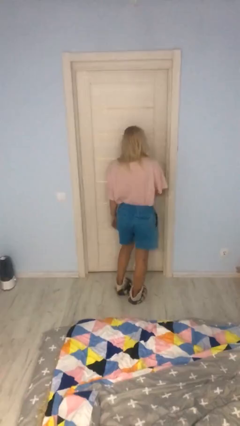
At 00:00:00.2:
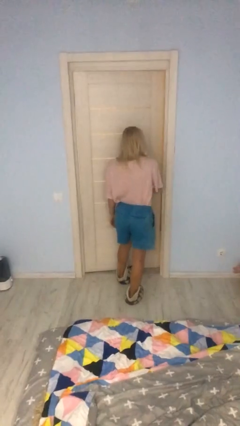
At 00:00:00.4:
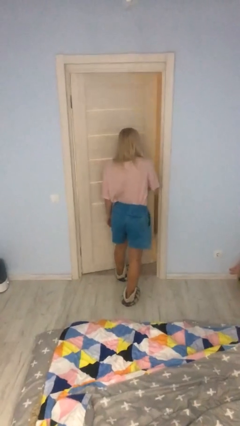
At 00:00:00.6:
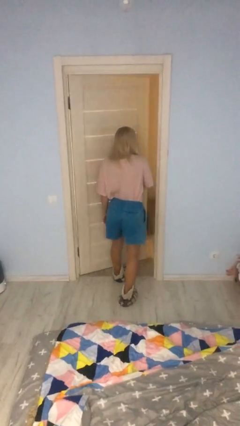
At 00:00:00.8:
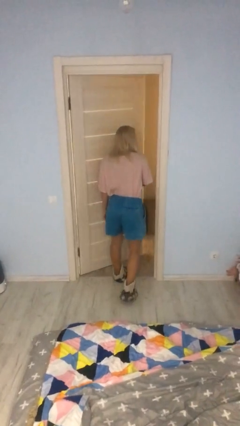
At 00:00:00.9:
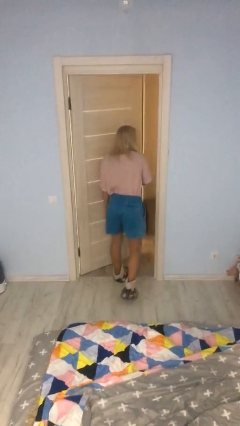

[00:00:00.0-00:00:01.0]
person opens facility door

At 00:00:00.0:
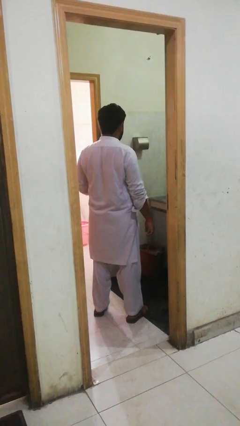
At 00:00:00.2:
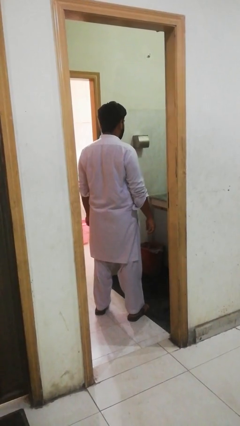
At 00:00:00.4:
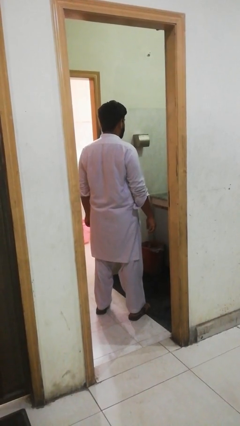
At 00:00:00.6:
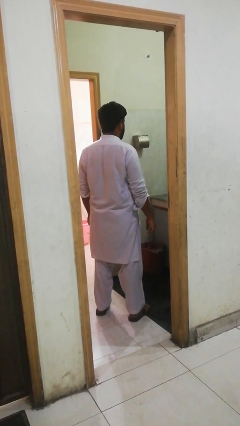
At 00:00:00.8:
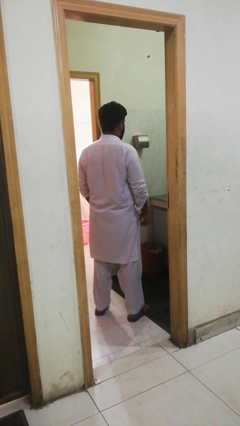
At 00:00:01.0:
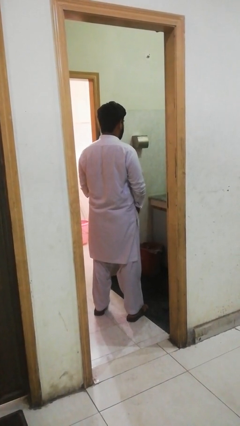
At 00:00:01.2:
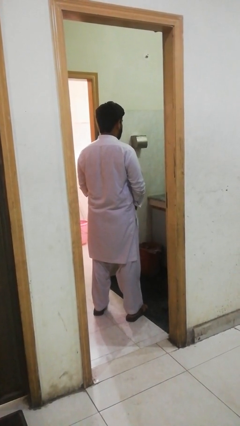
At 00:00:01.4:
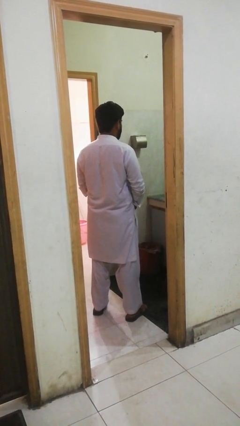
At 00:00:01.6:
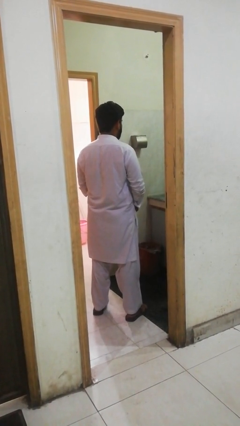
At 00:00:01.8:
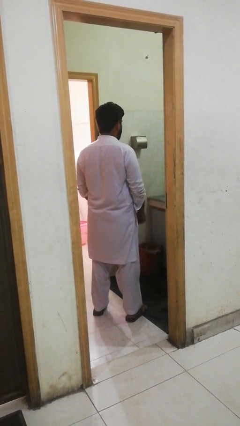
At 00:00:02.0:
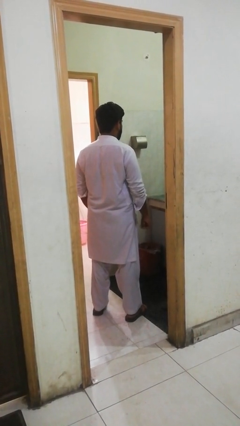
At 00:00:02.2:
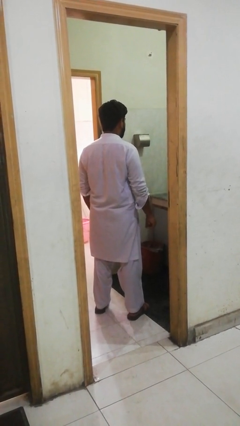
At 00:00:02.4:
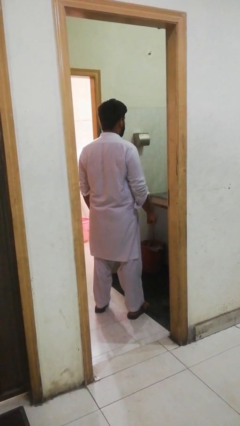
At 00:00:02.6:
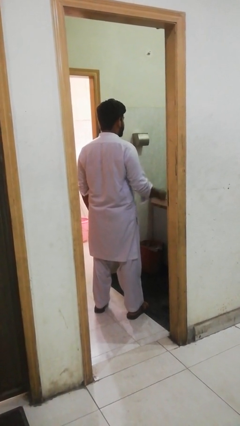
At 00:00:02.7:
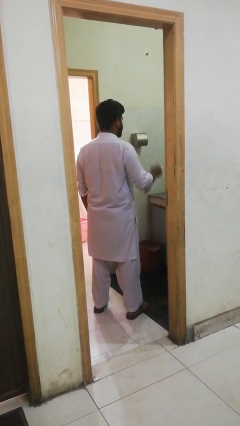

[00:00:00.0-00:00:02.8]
person flosses

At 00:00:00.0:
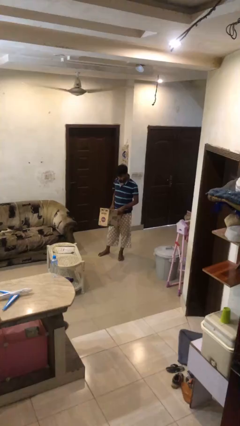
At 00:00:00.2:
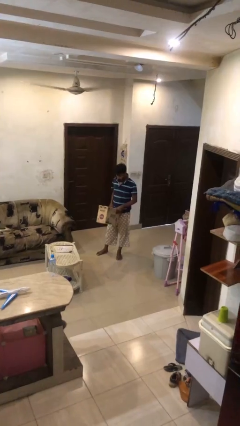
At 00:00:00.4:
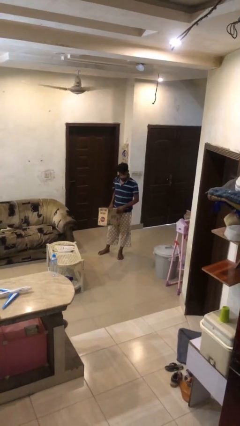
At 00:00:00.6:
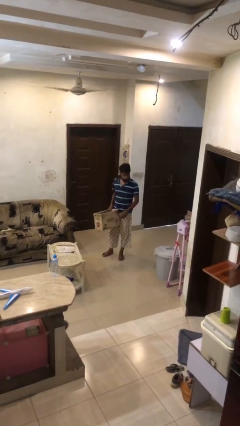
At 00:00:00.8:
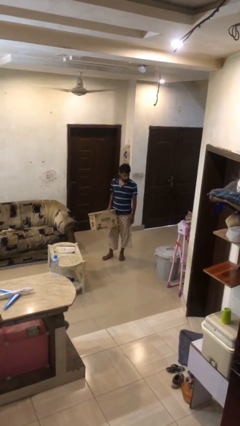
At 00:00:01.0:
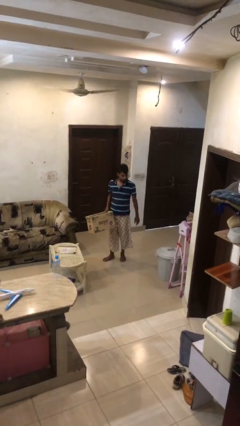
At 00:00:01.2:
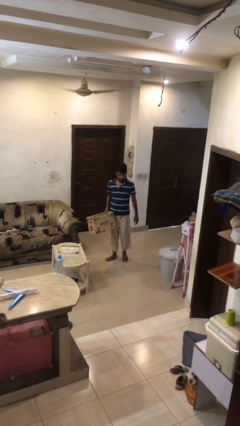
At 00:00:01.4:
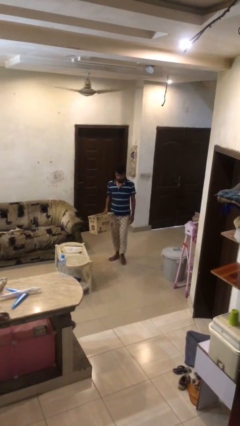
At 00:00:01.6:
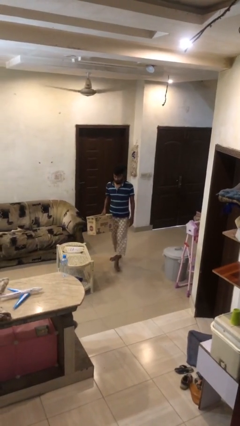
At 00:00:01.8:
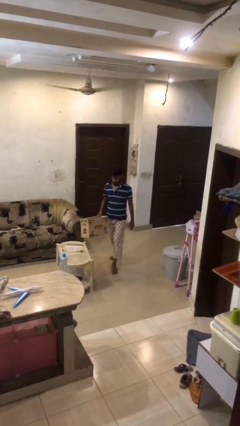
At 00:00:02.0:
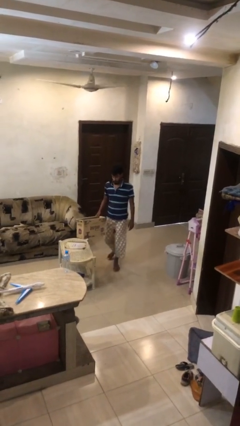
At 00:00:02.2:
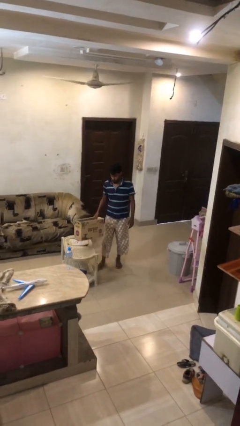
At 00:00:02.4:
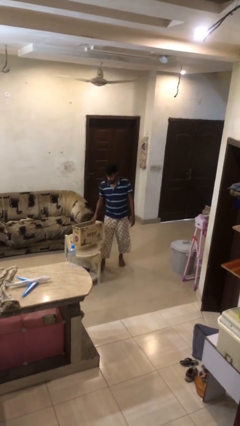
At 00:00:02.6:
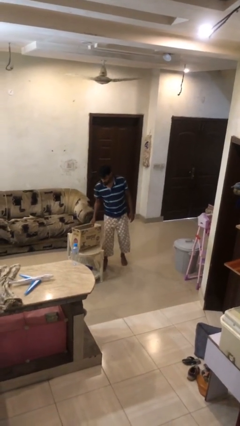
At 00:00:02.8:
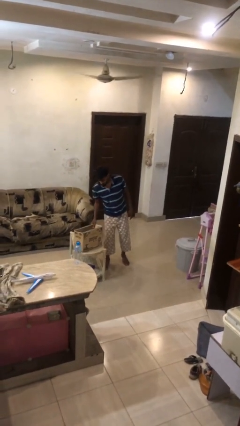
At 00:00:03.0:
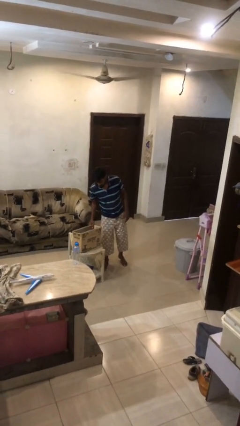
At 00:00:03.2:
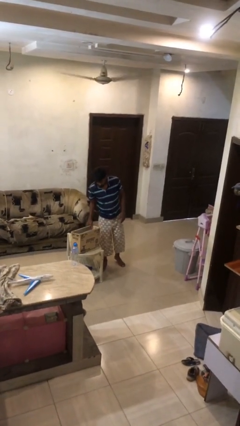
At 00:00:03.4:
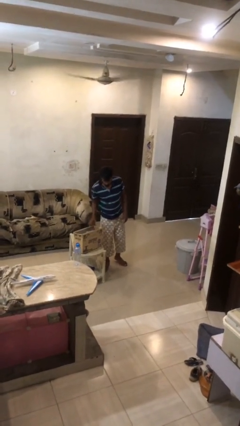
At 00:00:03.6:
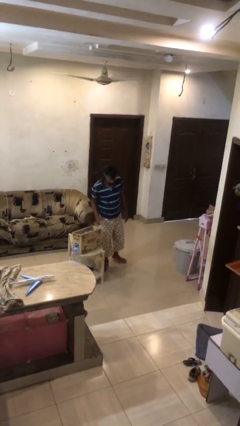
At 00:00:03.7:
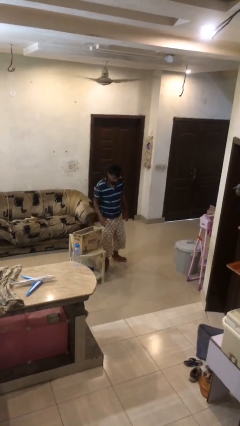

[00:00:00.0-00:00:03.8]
person puts down object on table

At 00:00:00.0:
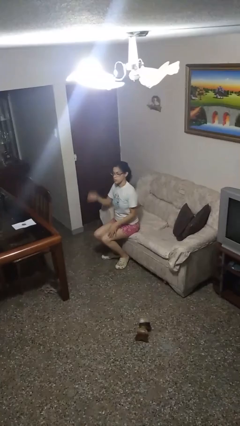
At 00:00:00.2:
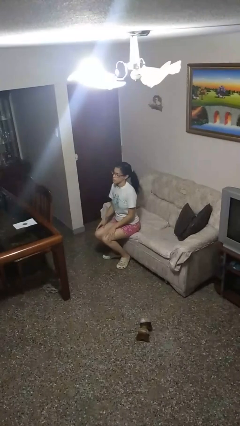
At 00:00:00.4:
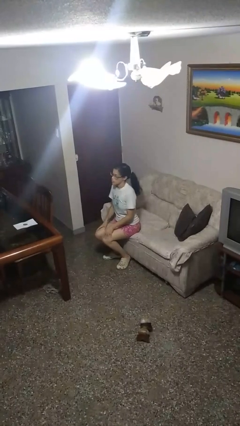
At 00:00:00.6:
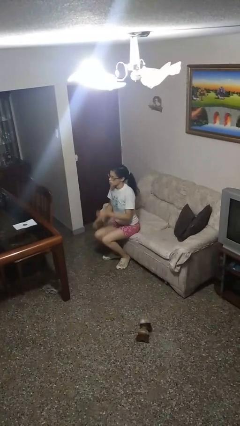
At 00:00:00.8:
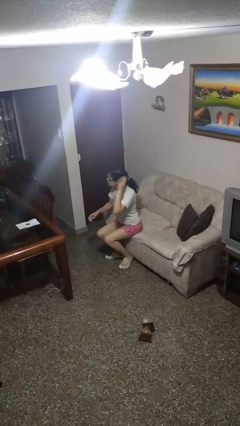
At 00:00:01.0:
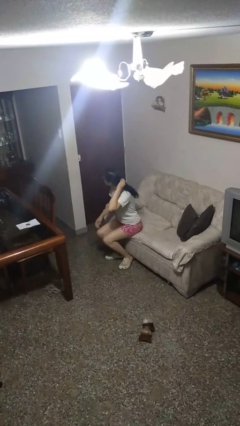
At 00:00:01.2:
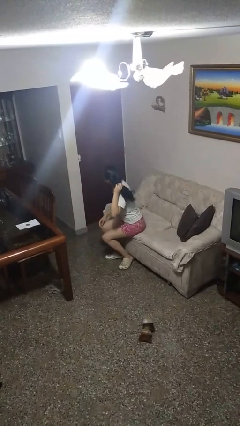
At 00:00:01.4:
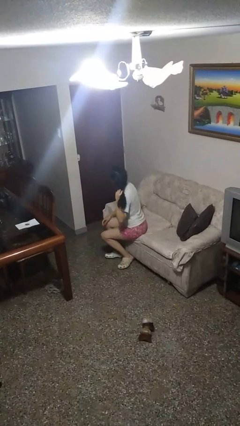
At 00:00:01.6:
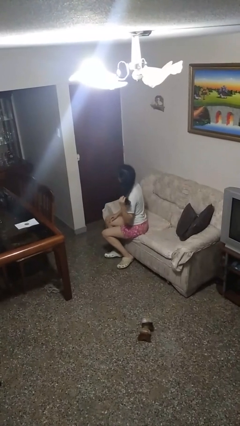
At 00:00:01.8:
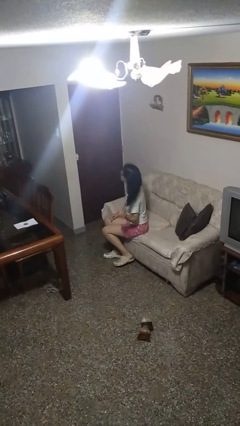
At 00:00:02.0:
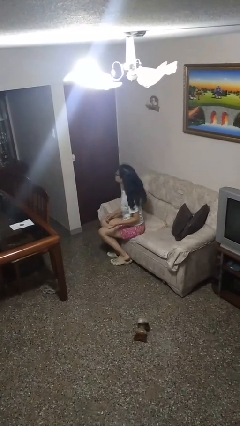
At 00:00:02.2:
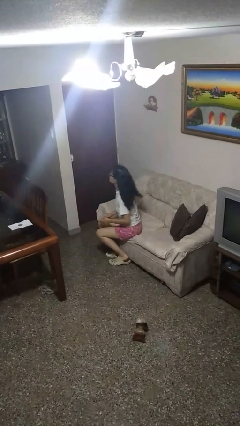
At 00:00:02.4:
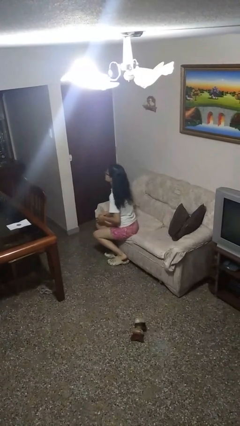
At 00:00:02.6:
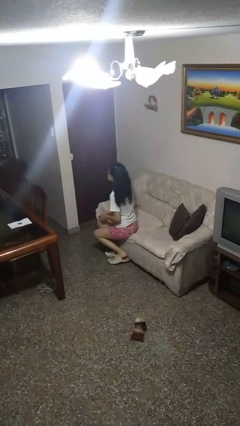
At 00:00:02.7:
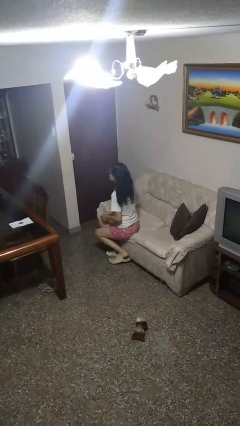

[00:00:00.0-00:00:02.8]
person takes off hairtie

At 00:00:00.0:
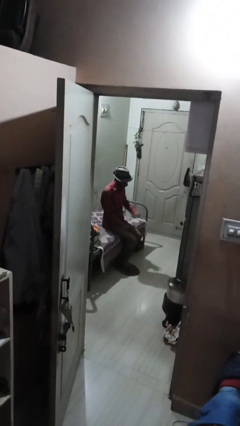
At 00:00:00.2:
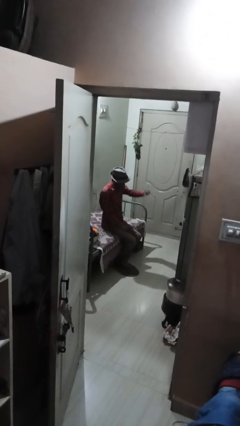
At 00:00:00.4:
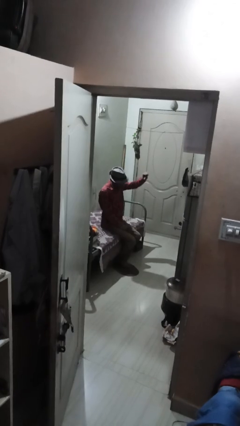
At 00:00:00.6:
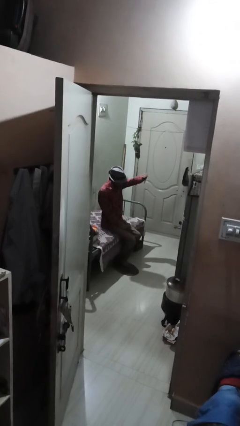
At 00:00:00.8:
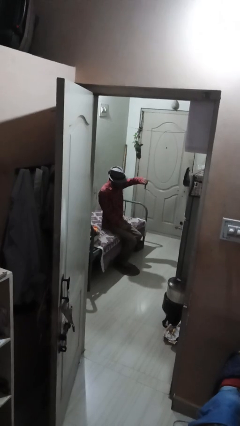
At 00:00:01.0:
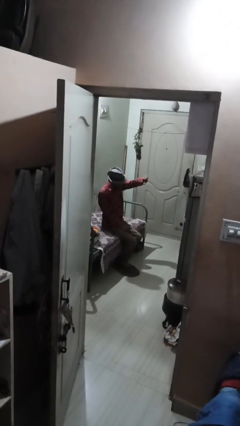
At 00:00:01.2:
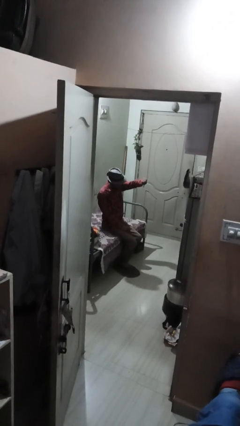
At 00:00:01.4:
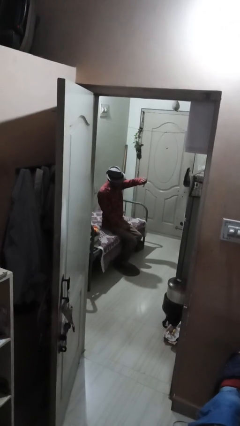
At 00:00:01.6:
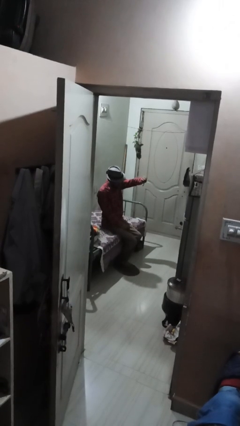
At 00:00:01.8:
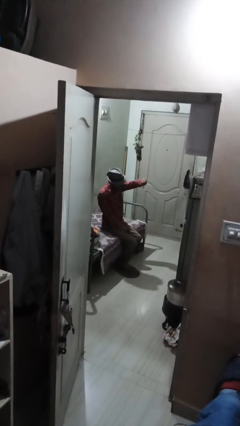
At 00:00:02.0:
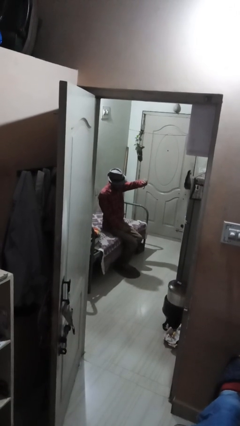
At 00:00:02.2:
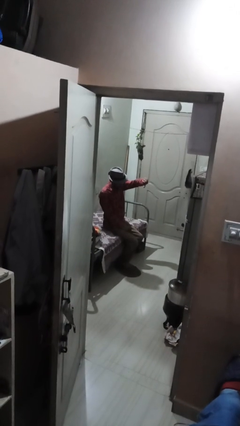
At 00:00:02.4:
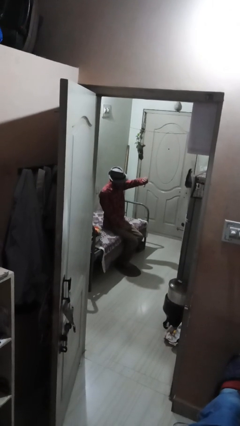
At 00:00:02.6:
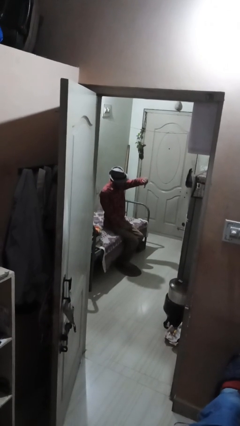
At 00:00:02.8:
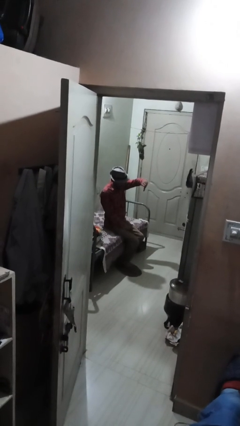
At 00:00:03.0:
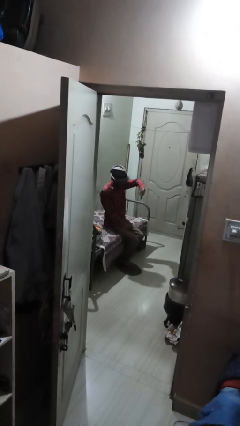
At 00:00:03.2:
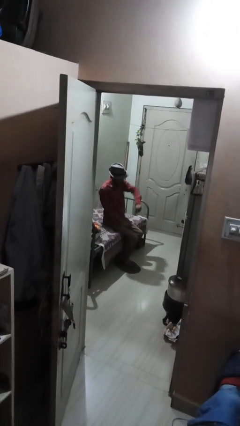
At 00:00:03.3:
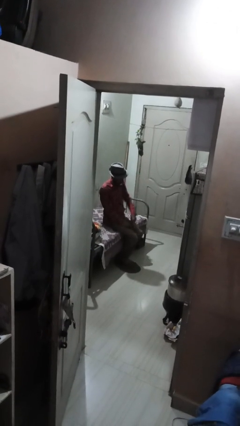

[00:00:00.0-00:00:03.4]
person gestures thumbs down

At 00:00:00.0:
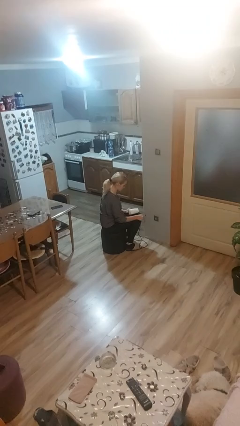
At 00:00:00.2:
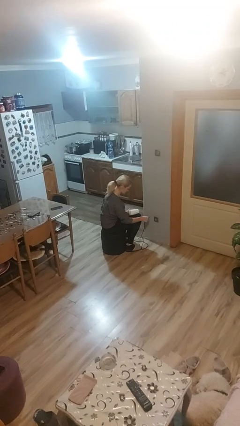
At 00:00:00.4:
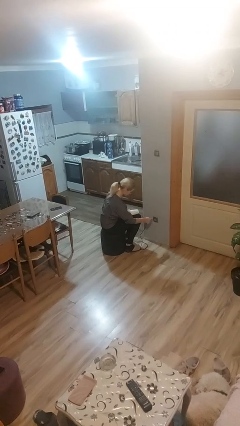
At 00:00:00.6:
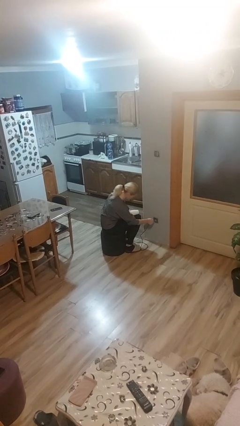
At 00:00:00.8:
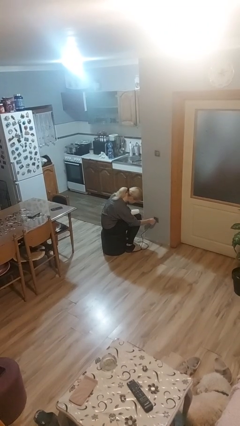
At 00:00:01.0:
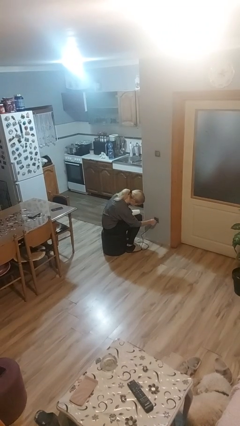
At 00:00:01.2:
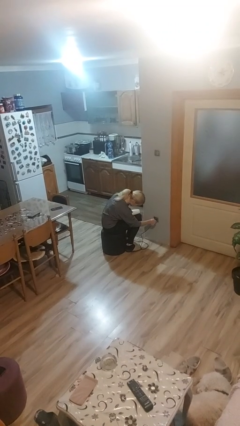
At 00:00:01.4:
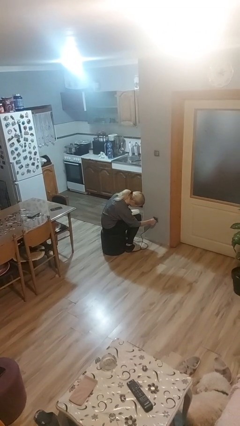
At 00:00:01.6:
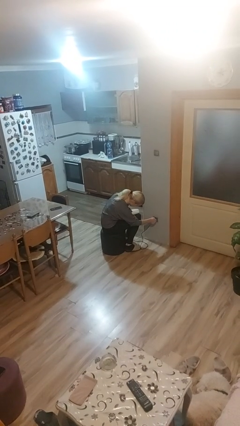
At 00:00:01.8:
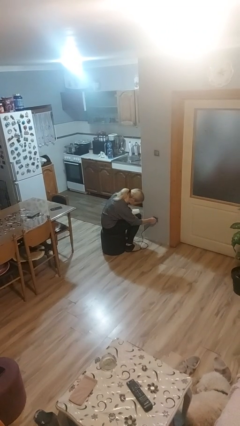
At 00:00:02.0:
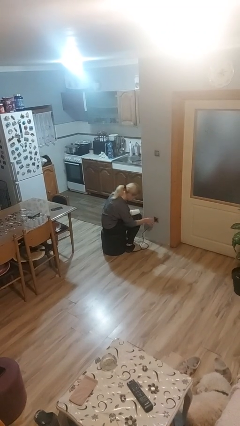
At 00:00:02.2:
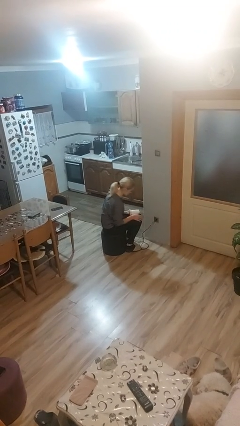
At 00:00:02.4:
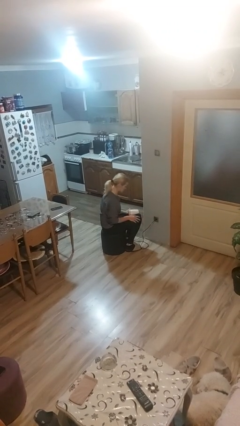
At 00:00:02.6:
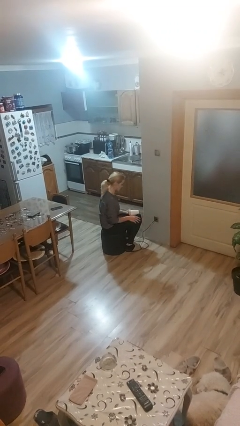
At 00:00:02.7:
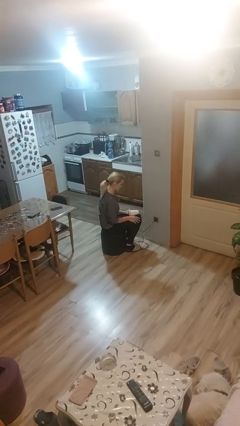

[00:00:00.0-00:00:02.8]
person plugs into electrical socket

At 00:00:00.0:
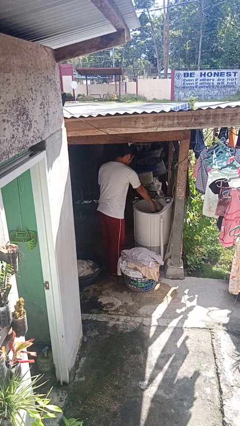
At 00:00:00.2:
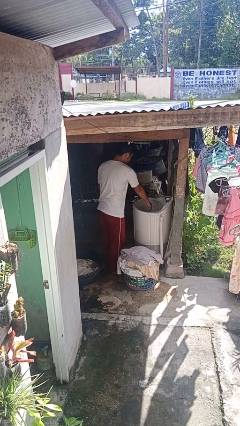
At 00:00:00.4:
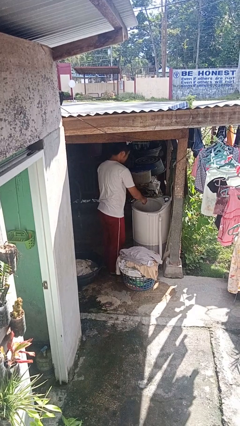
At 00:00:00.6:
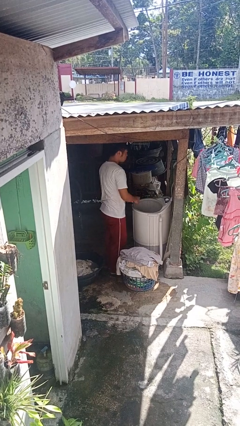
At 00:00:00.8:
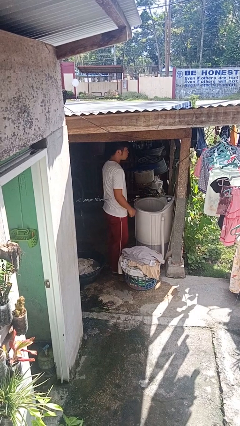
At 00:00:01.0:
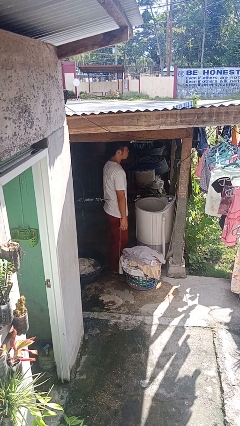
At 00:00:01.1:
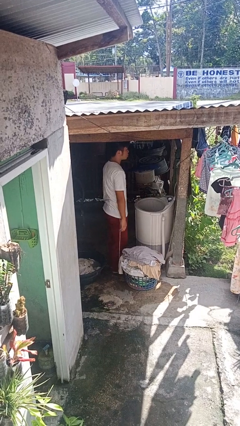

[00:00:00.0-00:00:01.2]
person loads clotheswasher
